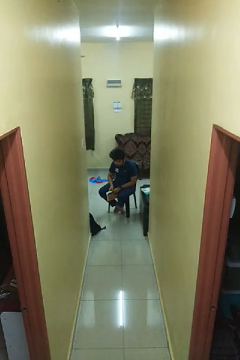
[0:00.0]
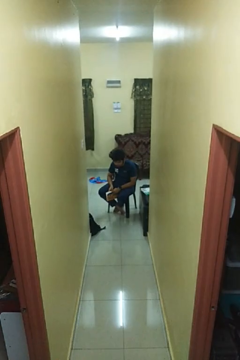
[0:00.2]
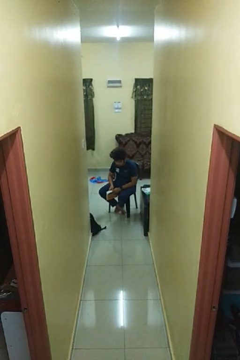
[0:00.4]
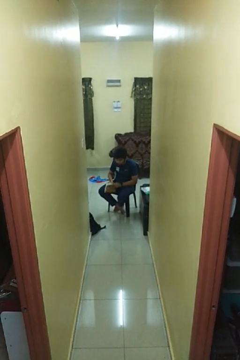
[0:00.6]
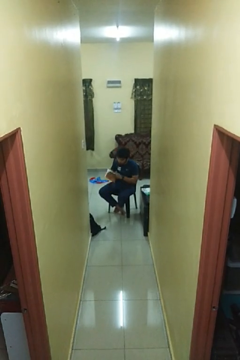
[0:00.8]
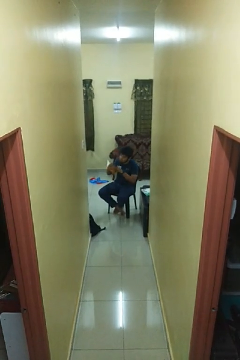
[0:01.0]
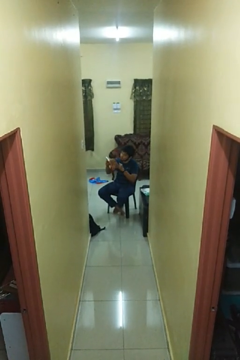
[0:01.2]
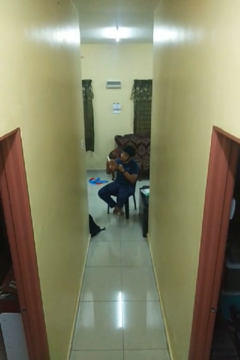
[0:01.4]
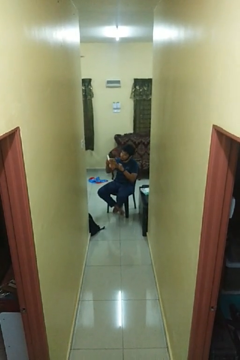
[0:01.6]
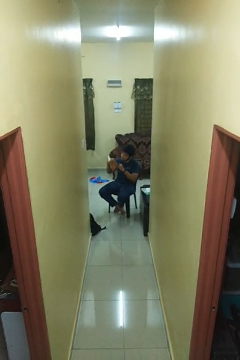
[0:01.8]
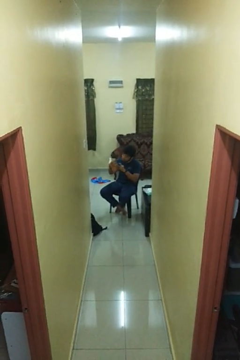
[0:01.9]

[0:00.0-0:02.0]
person reads book

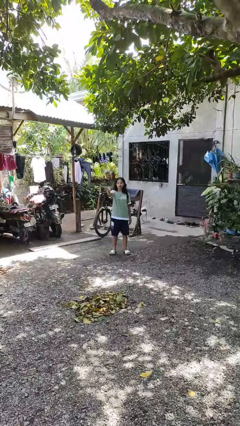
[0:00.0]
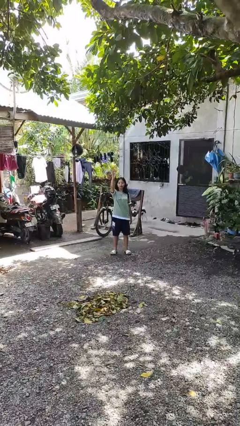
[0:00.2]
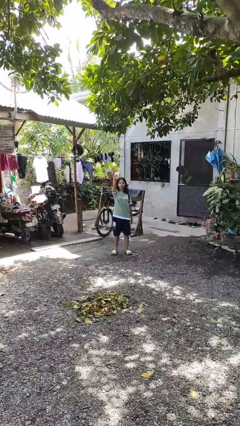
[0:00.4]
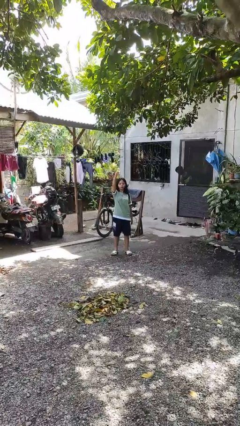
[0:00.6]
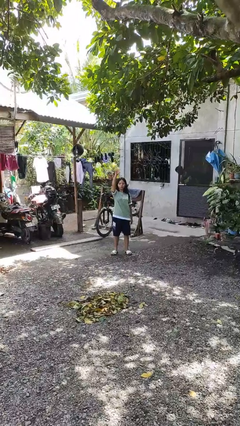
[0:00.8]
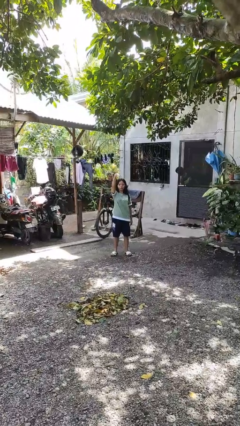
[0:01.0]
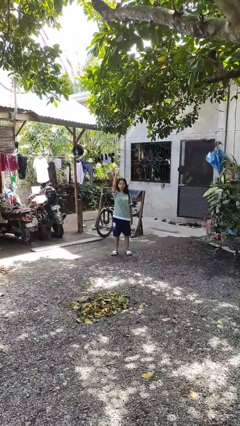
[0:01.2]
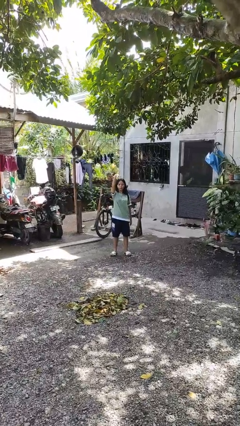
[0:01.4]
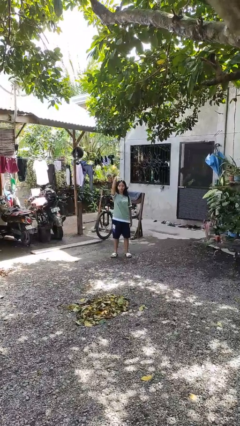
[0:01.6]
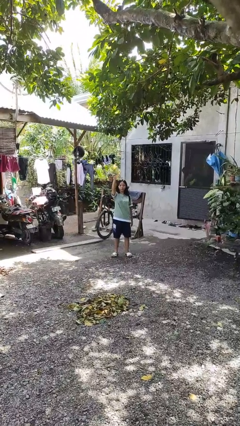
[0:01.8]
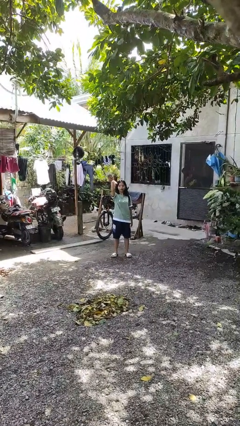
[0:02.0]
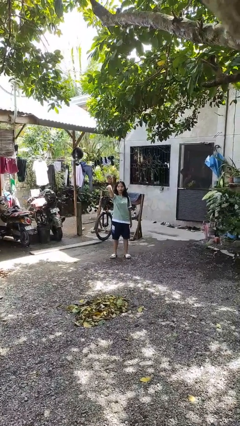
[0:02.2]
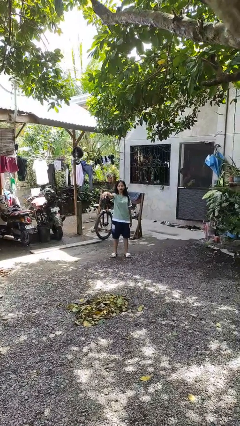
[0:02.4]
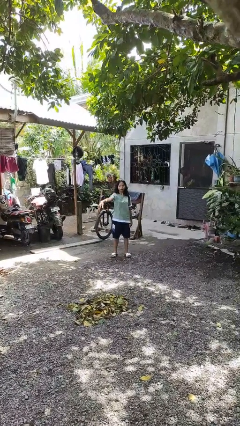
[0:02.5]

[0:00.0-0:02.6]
person gestures come here

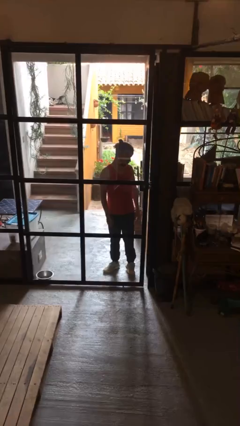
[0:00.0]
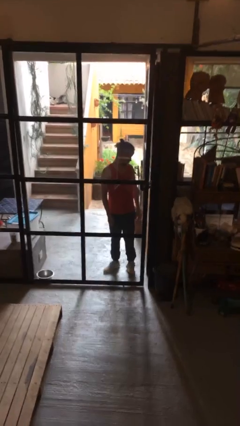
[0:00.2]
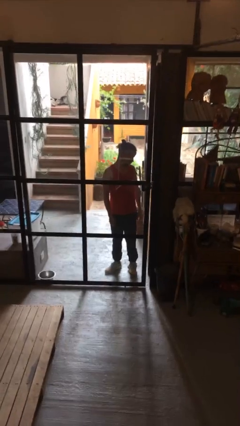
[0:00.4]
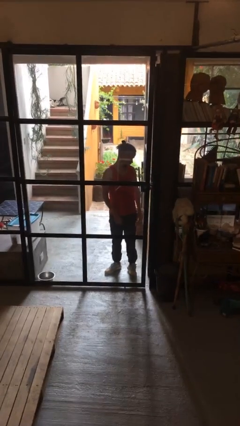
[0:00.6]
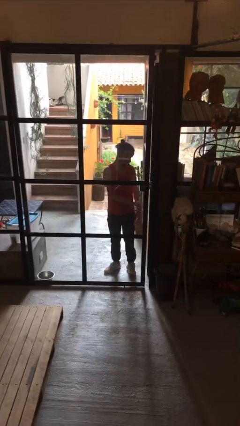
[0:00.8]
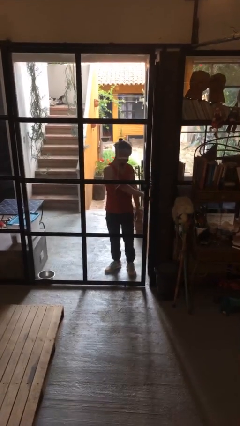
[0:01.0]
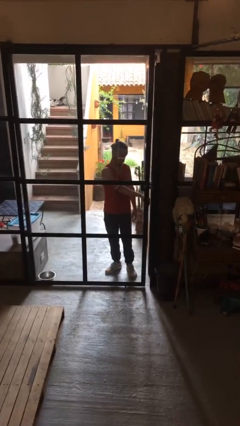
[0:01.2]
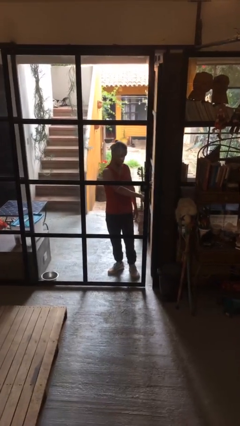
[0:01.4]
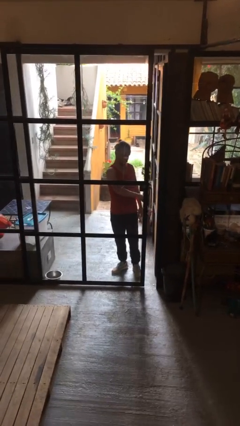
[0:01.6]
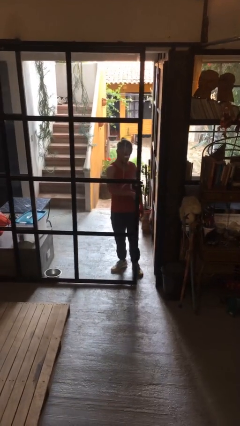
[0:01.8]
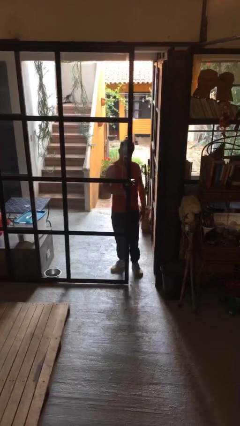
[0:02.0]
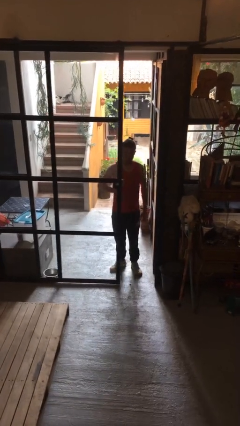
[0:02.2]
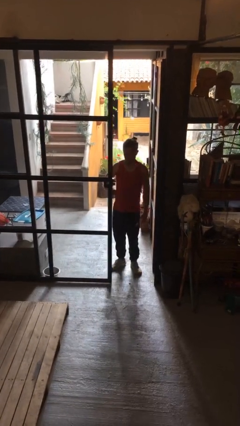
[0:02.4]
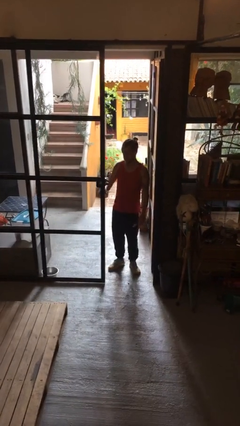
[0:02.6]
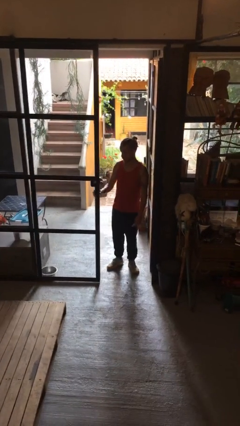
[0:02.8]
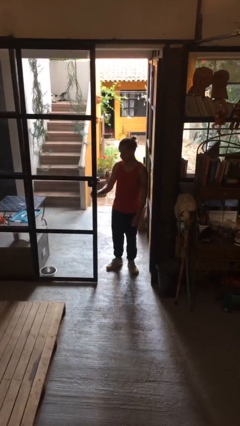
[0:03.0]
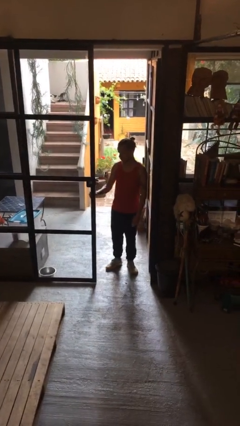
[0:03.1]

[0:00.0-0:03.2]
person opens sliding door

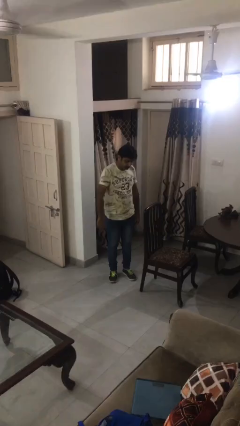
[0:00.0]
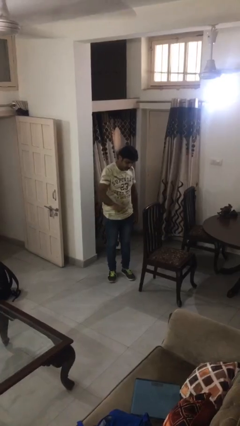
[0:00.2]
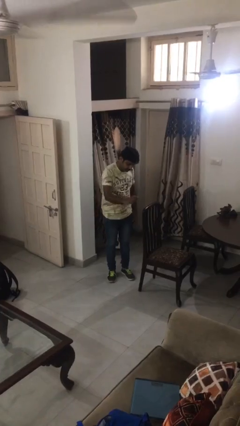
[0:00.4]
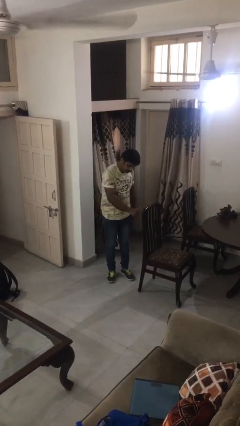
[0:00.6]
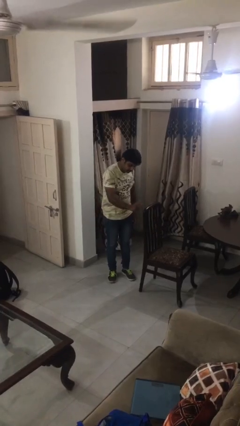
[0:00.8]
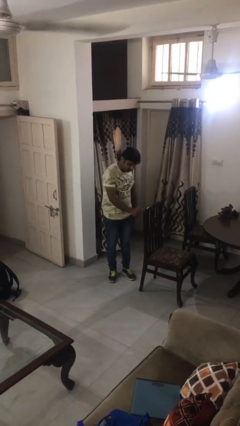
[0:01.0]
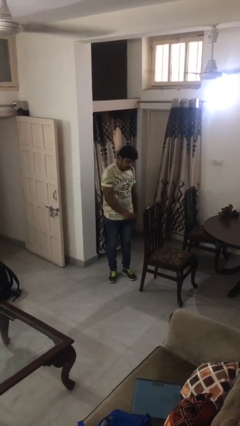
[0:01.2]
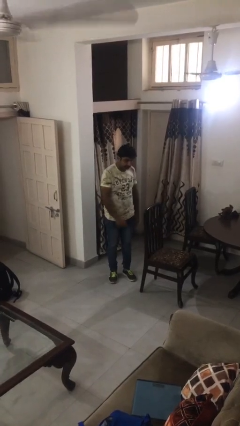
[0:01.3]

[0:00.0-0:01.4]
person taps object with finger

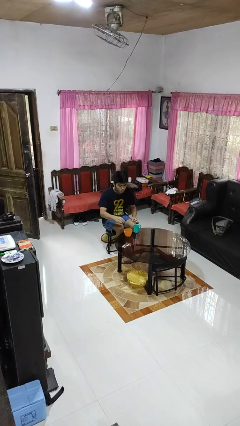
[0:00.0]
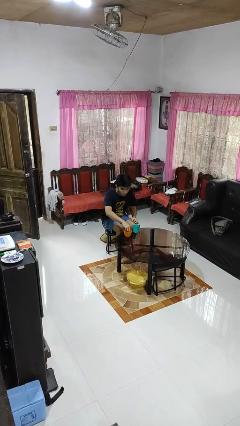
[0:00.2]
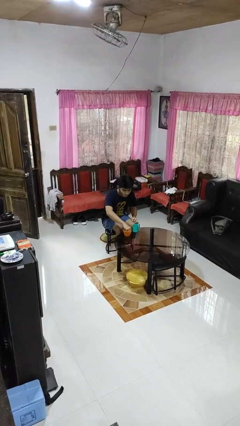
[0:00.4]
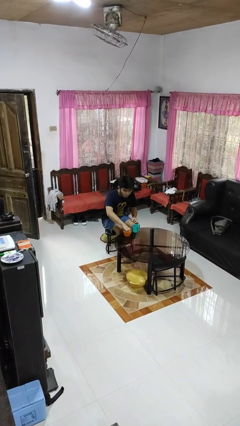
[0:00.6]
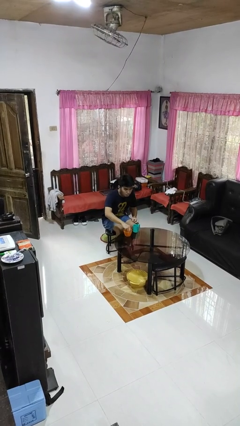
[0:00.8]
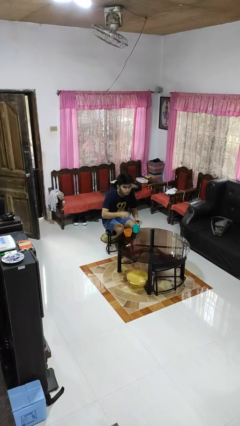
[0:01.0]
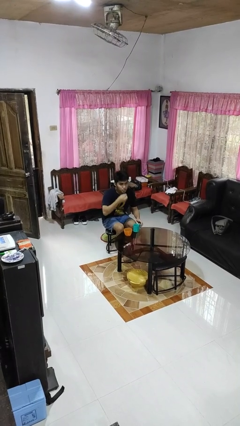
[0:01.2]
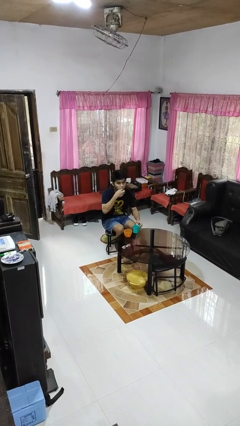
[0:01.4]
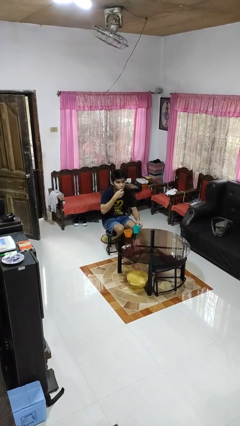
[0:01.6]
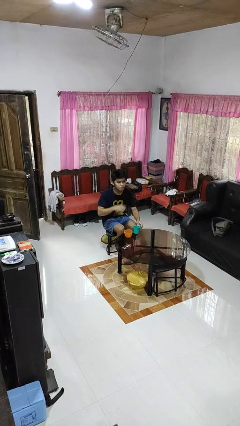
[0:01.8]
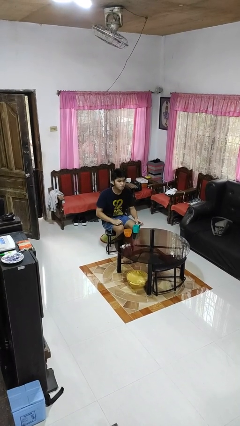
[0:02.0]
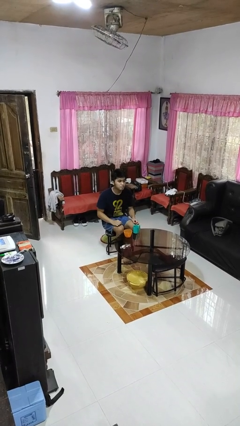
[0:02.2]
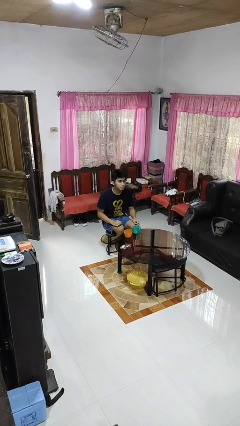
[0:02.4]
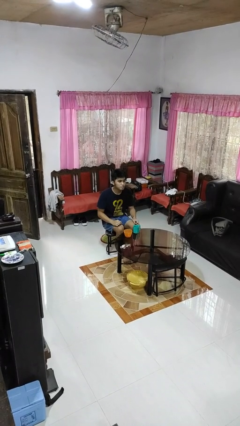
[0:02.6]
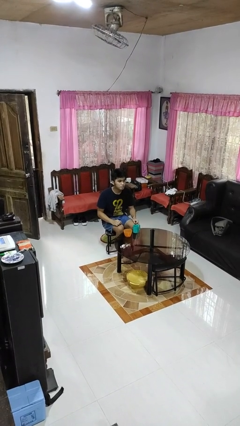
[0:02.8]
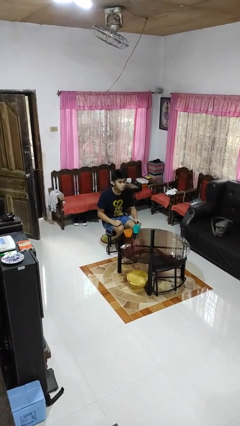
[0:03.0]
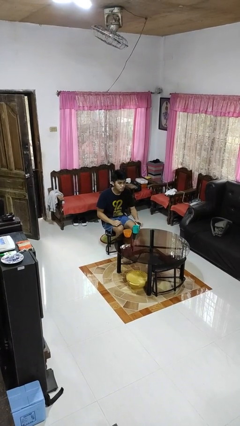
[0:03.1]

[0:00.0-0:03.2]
person takes medicine pills

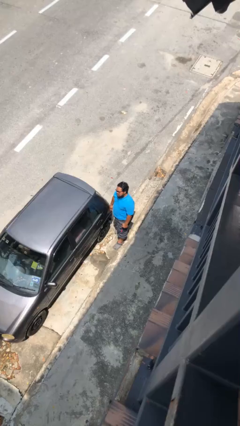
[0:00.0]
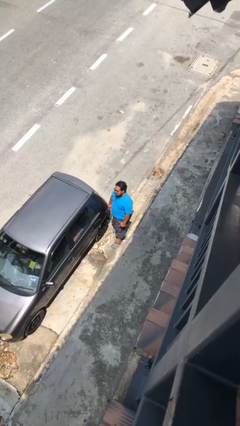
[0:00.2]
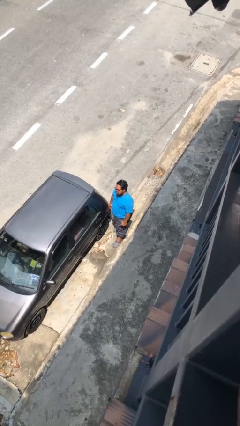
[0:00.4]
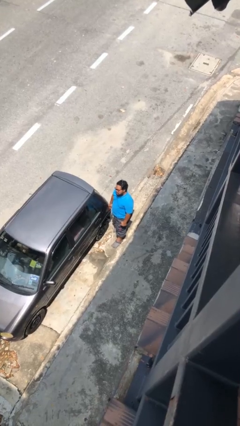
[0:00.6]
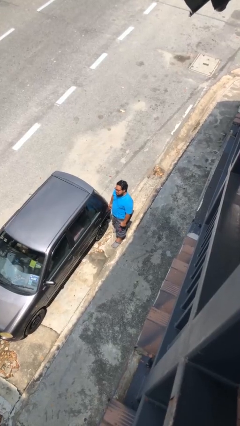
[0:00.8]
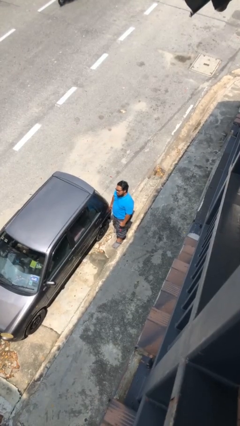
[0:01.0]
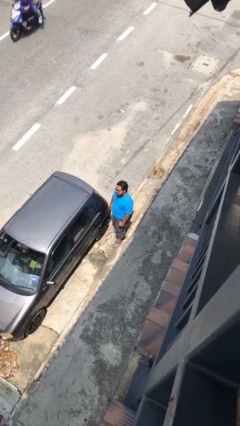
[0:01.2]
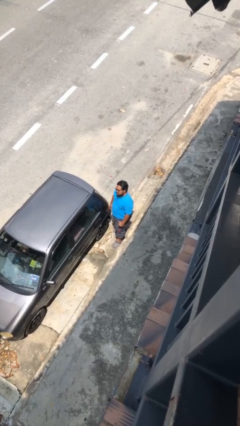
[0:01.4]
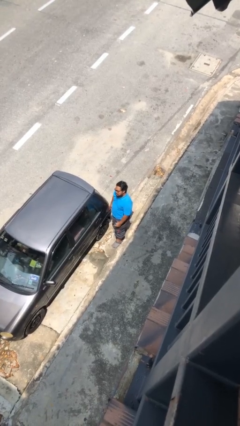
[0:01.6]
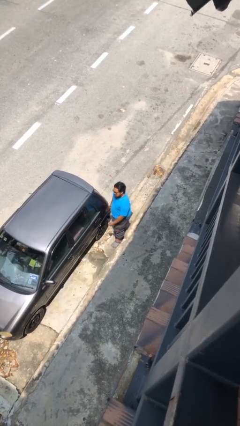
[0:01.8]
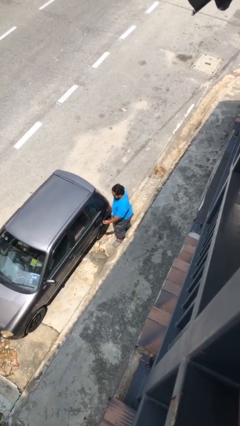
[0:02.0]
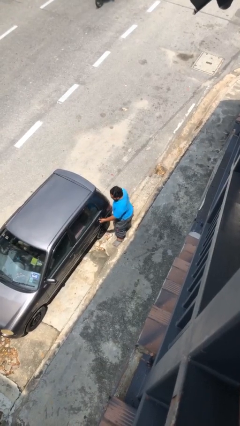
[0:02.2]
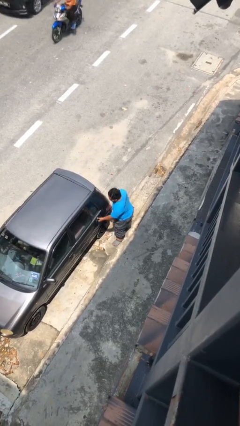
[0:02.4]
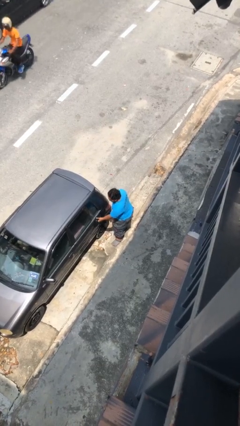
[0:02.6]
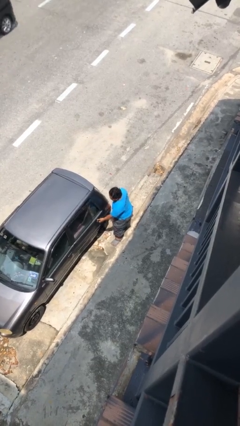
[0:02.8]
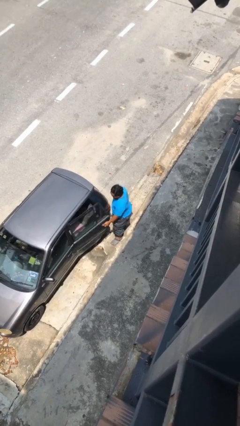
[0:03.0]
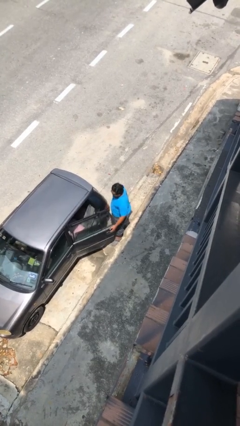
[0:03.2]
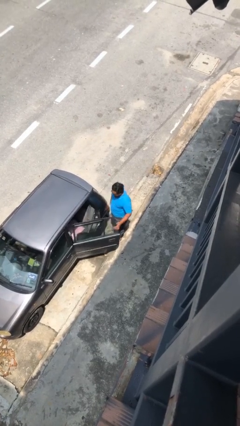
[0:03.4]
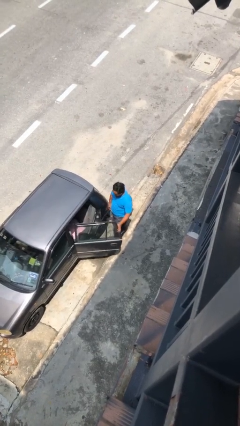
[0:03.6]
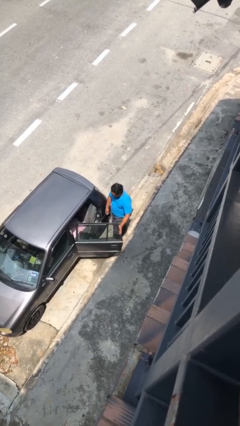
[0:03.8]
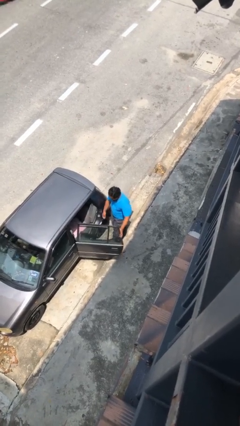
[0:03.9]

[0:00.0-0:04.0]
person opens car door

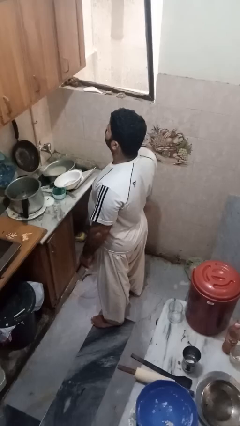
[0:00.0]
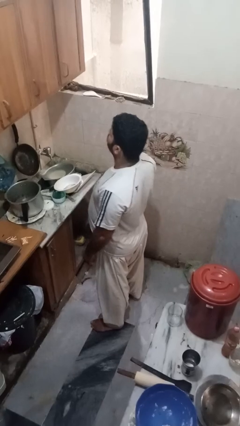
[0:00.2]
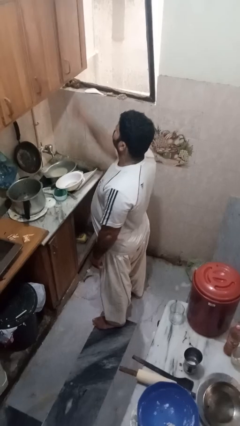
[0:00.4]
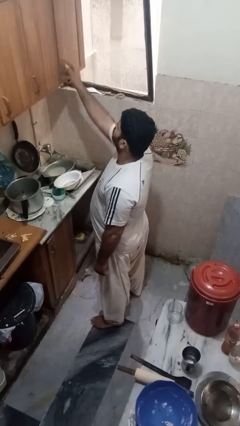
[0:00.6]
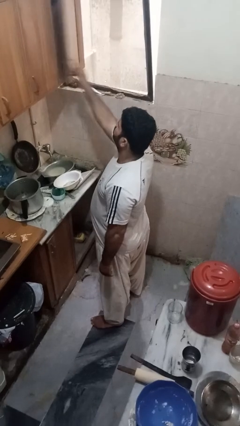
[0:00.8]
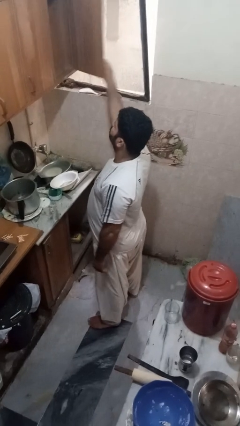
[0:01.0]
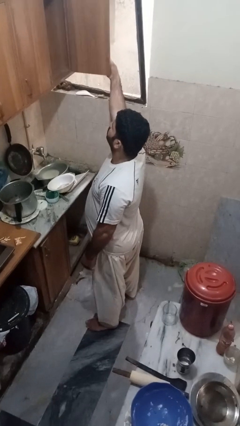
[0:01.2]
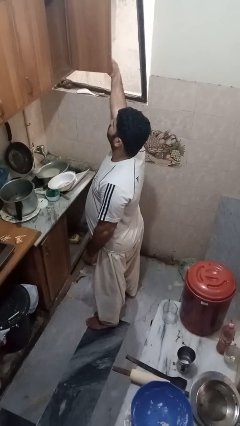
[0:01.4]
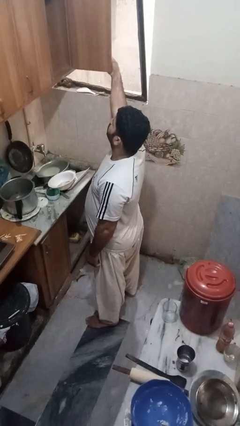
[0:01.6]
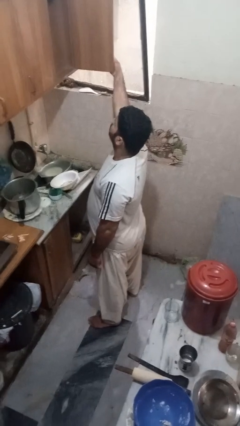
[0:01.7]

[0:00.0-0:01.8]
person opens cabinet
